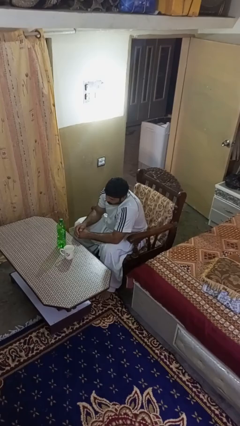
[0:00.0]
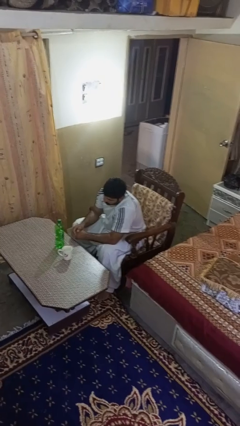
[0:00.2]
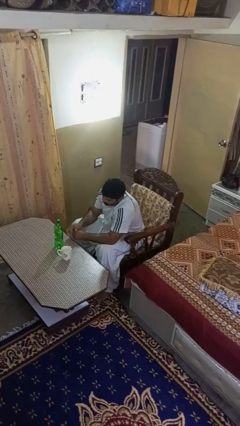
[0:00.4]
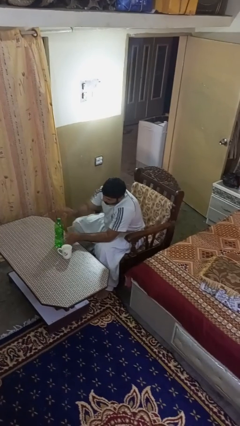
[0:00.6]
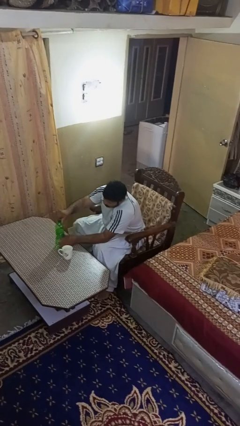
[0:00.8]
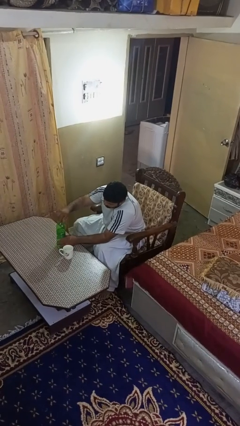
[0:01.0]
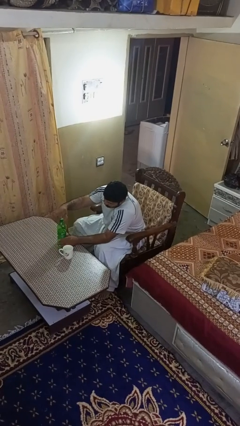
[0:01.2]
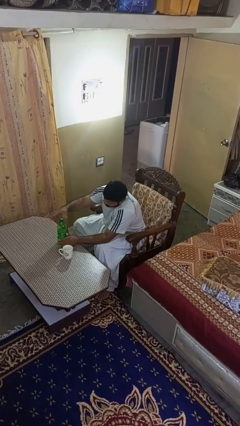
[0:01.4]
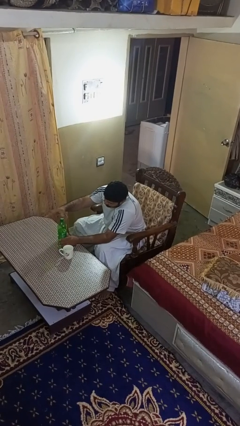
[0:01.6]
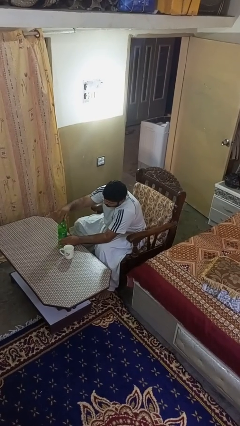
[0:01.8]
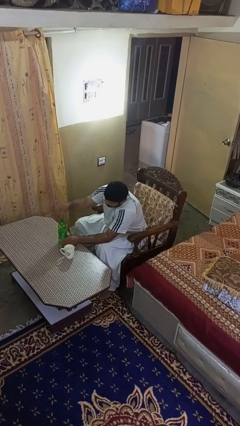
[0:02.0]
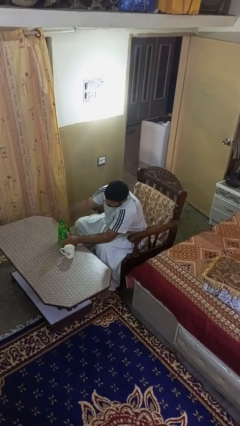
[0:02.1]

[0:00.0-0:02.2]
person unscrews lid from bottle

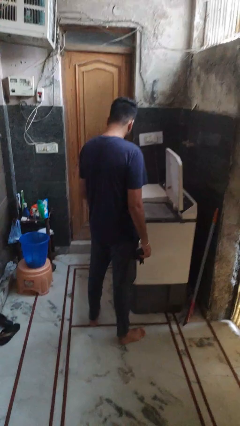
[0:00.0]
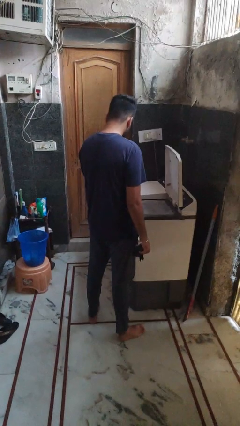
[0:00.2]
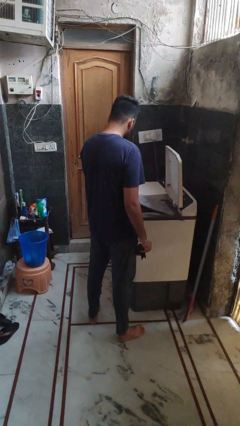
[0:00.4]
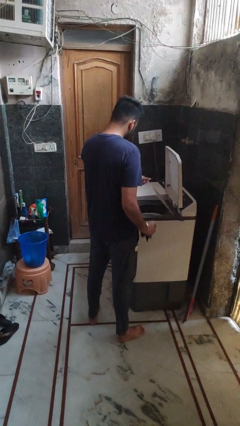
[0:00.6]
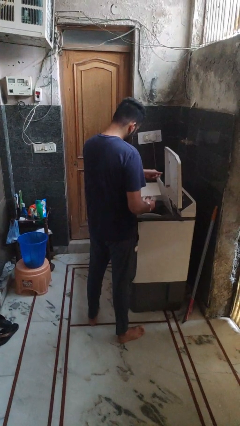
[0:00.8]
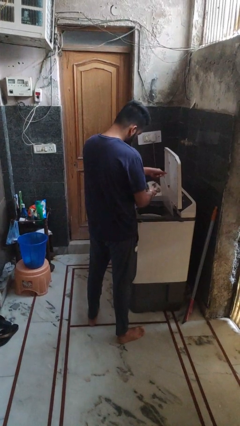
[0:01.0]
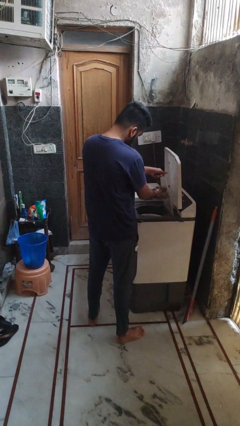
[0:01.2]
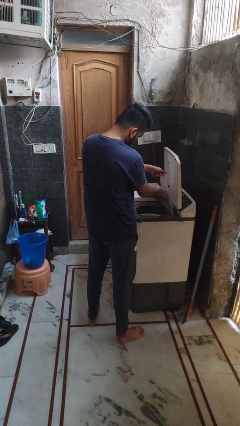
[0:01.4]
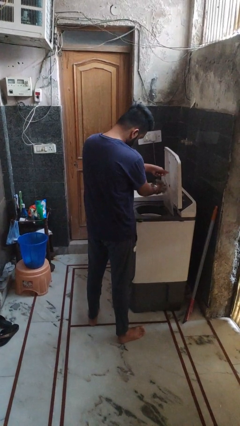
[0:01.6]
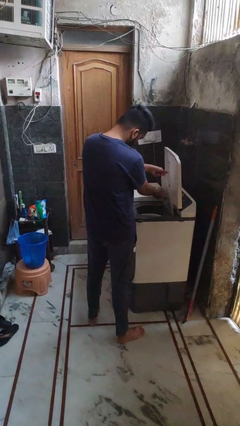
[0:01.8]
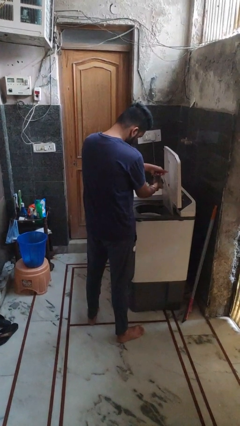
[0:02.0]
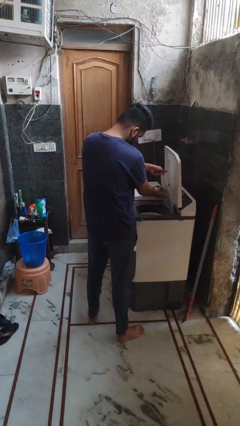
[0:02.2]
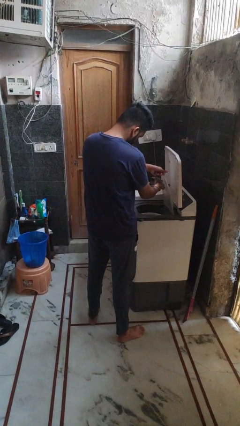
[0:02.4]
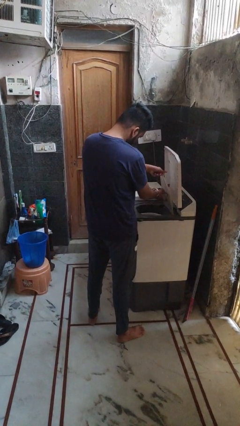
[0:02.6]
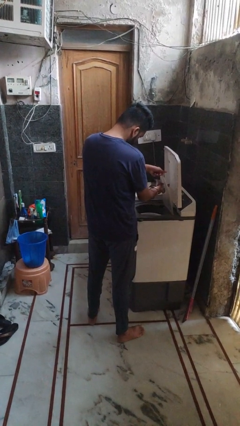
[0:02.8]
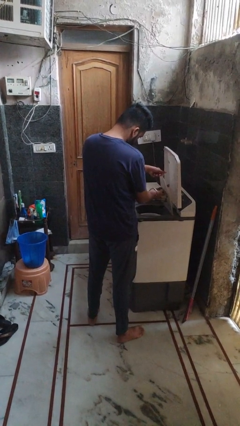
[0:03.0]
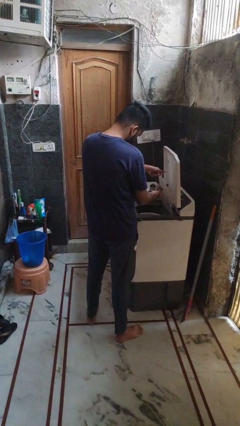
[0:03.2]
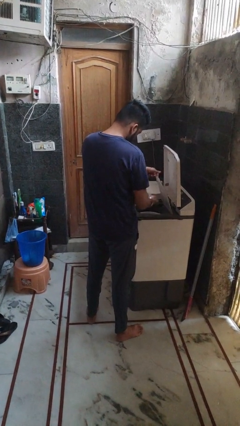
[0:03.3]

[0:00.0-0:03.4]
person cleans dryer lint trap

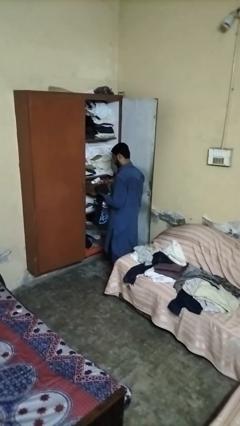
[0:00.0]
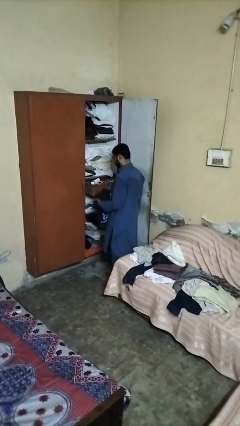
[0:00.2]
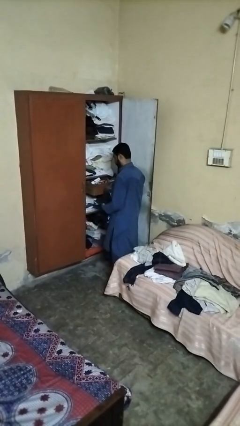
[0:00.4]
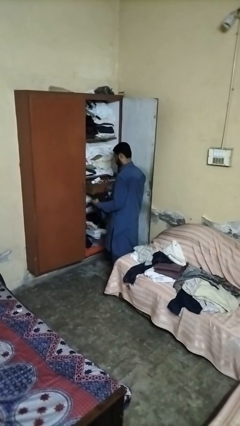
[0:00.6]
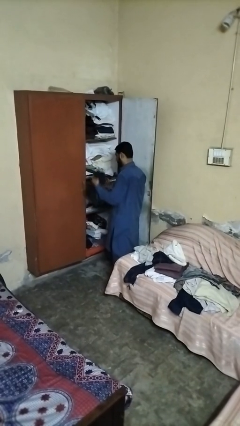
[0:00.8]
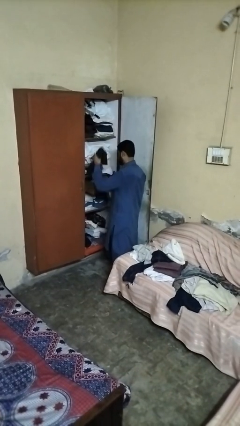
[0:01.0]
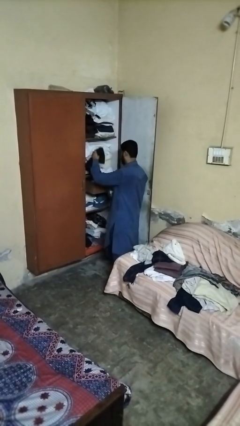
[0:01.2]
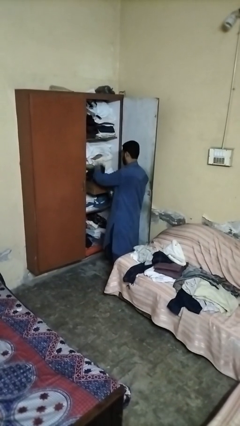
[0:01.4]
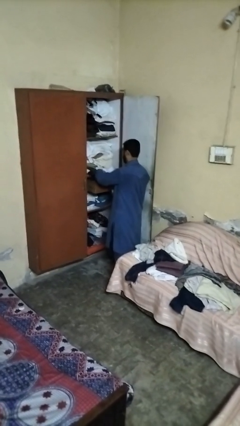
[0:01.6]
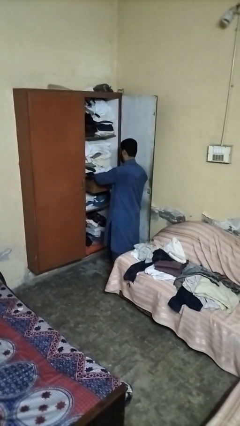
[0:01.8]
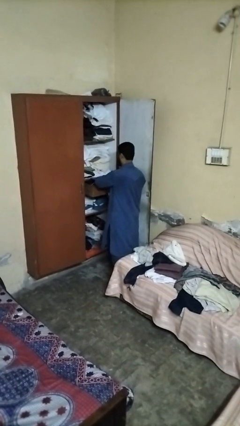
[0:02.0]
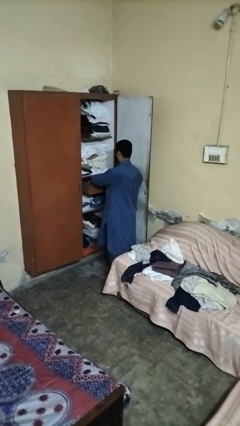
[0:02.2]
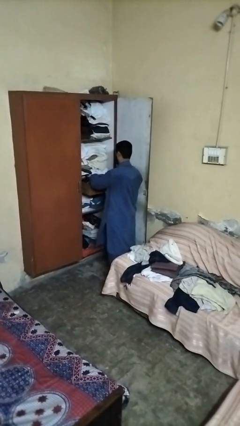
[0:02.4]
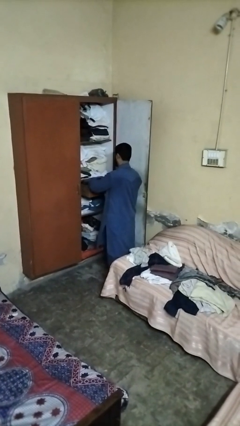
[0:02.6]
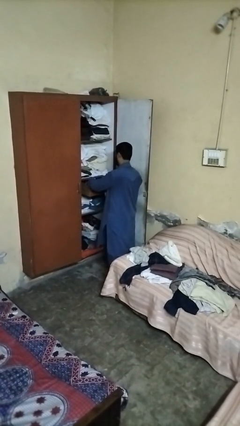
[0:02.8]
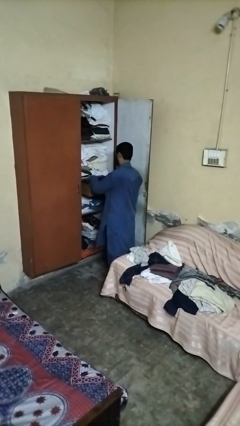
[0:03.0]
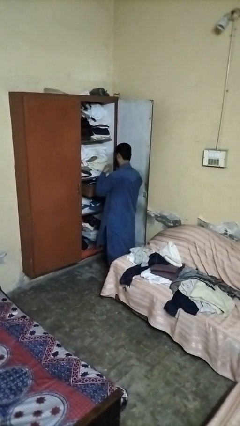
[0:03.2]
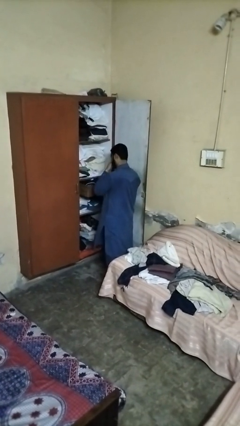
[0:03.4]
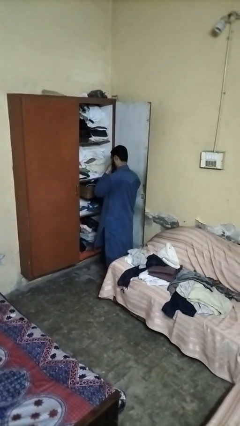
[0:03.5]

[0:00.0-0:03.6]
person puts clothes into dresser

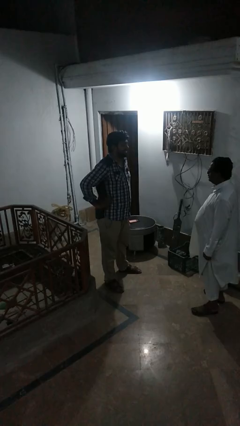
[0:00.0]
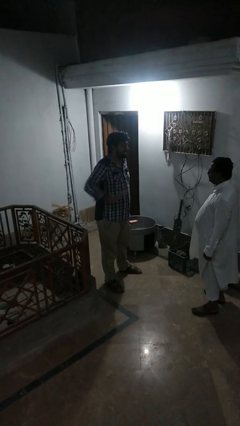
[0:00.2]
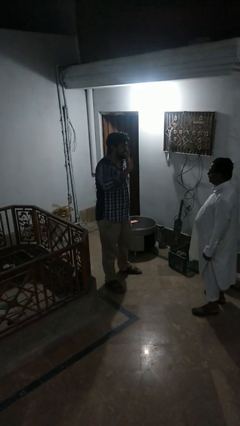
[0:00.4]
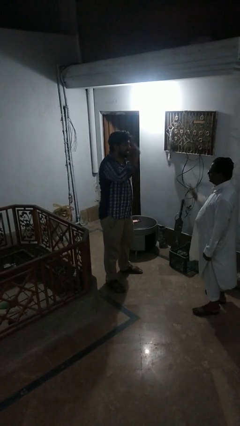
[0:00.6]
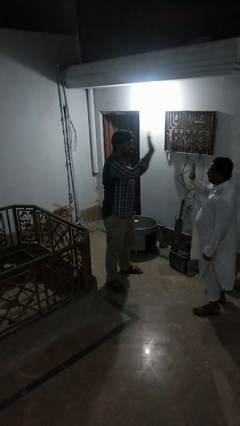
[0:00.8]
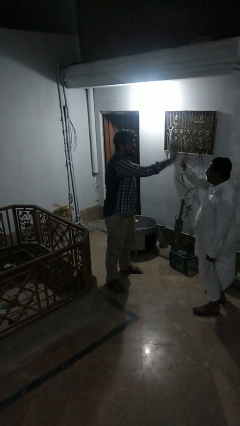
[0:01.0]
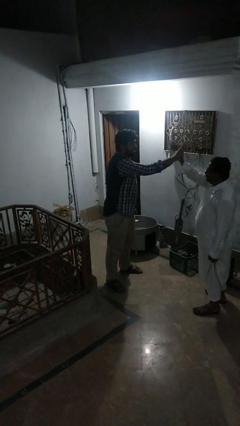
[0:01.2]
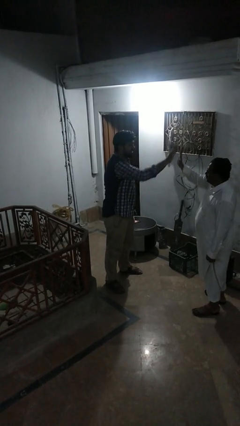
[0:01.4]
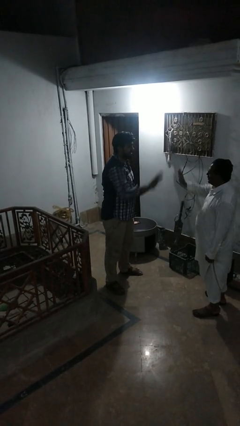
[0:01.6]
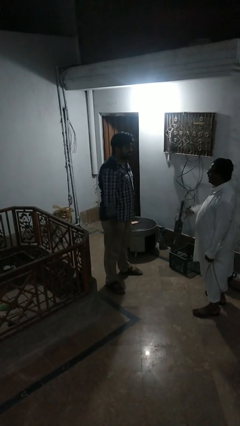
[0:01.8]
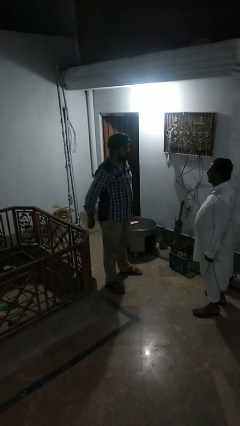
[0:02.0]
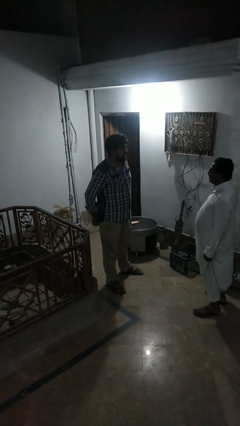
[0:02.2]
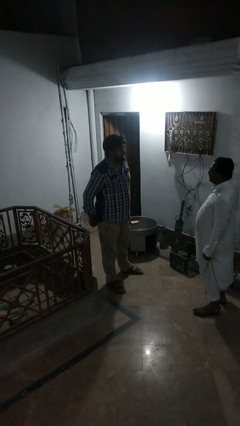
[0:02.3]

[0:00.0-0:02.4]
person highfives hand

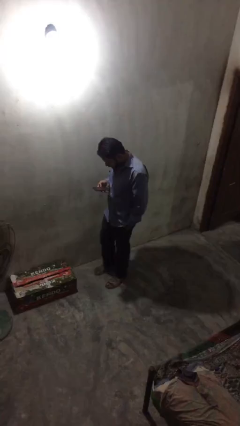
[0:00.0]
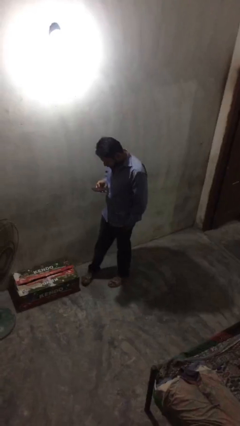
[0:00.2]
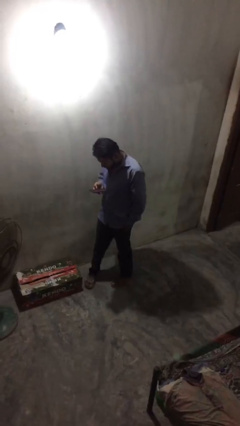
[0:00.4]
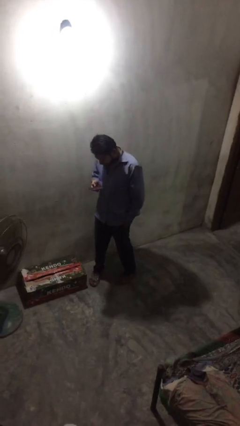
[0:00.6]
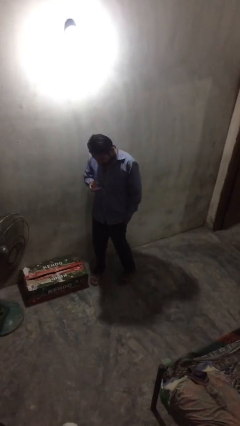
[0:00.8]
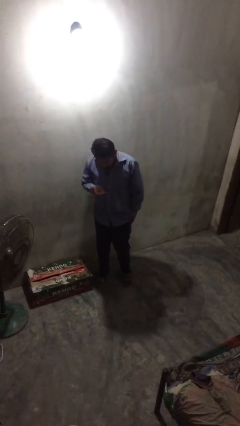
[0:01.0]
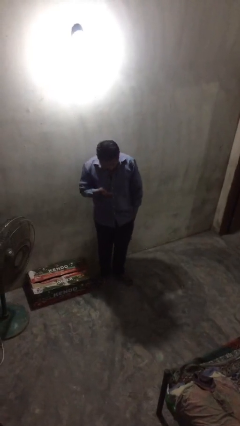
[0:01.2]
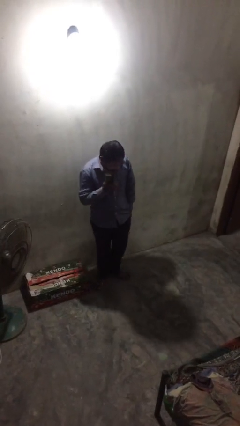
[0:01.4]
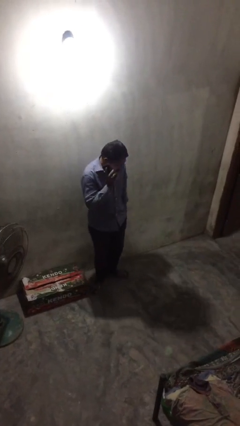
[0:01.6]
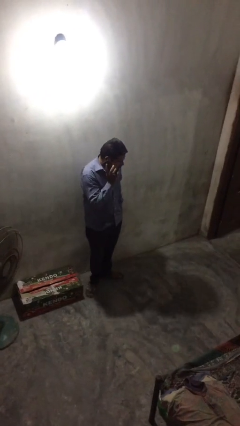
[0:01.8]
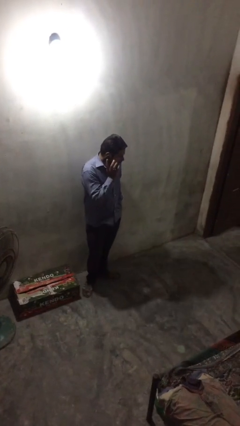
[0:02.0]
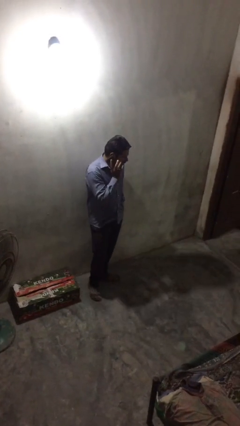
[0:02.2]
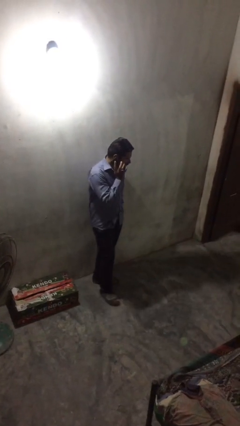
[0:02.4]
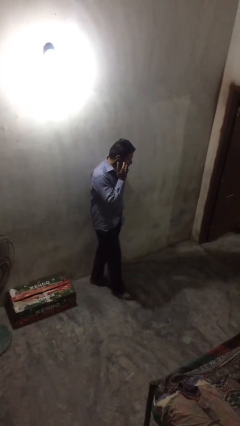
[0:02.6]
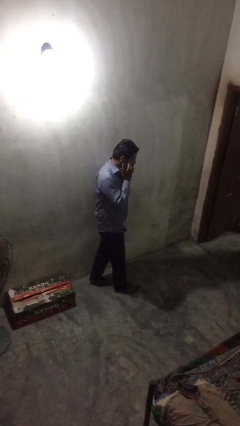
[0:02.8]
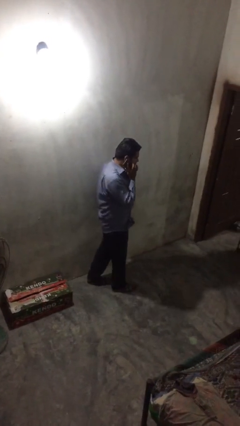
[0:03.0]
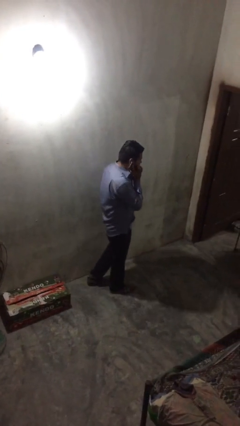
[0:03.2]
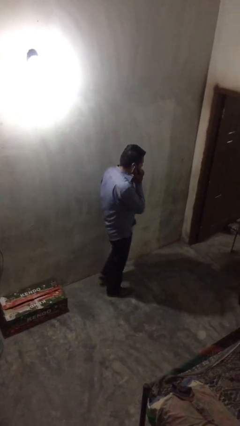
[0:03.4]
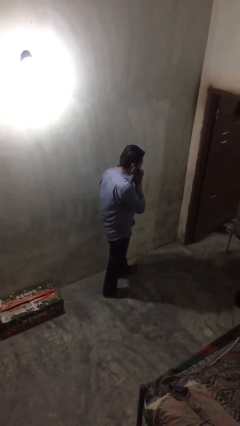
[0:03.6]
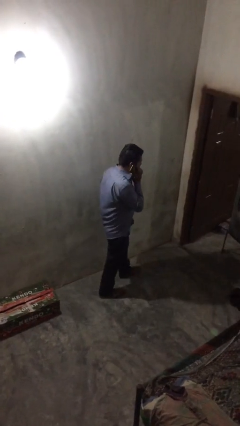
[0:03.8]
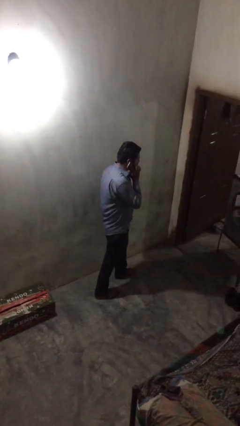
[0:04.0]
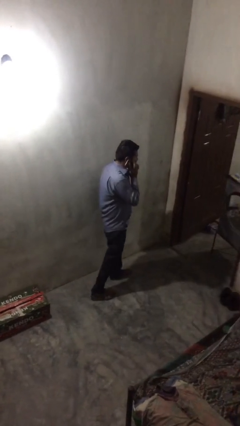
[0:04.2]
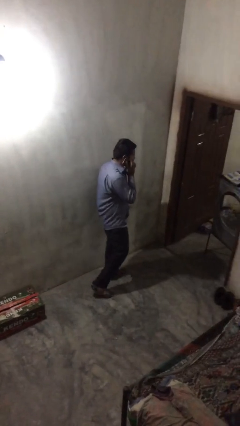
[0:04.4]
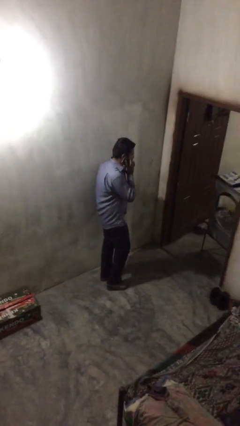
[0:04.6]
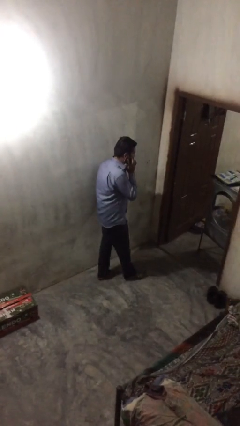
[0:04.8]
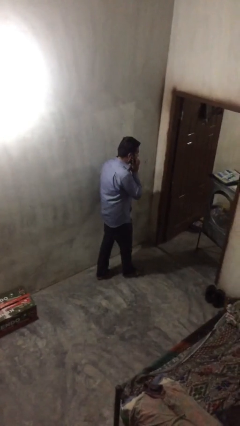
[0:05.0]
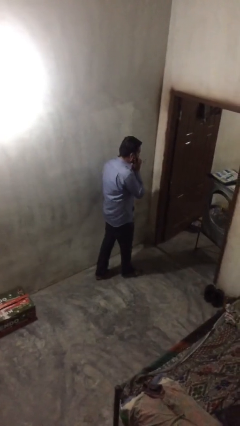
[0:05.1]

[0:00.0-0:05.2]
person talks on phone

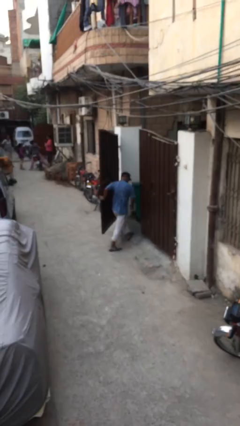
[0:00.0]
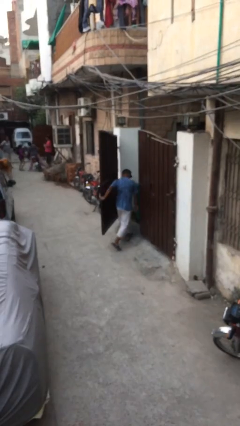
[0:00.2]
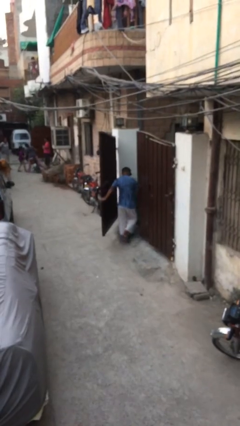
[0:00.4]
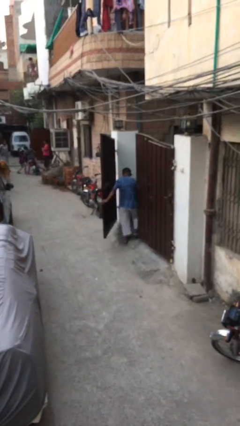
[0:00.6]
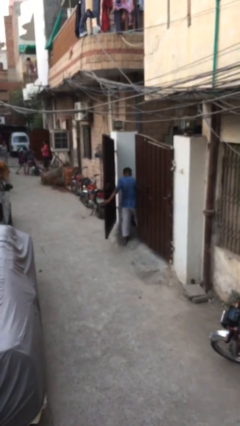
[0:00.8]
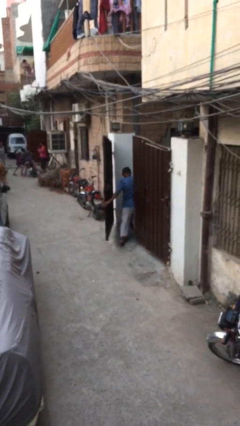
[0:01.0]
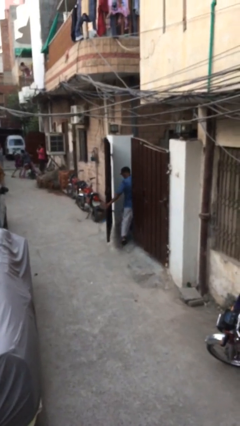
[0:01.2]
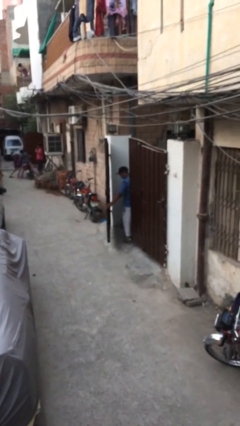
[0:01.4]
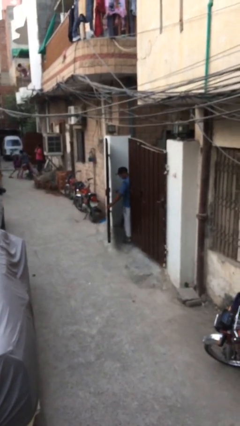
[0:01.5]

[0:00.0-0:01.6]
person exits scene through structure
